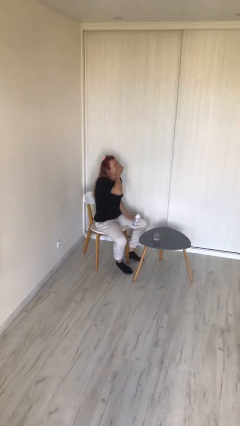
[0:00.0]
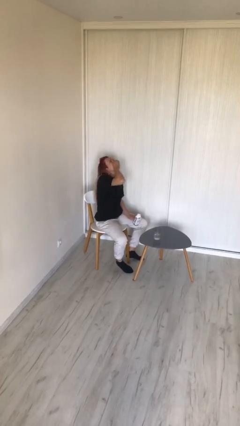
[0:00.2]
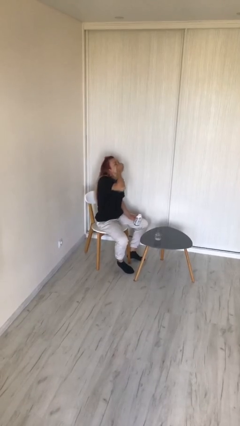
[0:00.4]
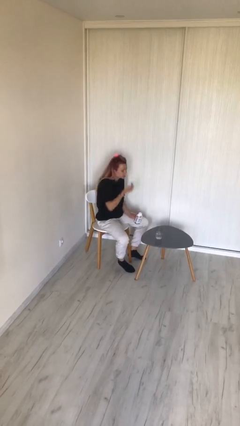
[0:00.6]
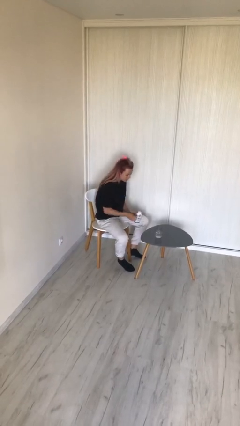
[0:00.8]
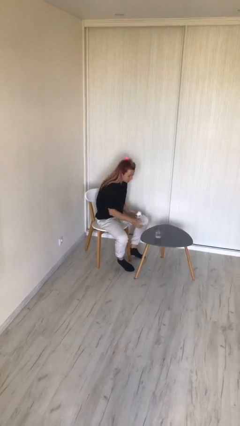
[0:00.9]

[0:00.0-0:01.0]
person takes medicine pills

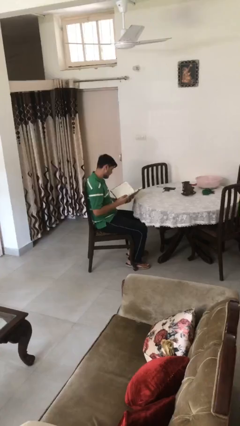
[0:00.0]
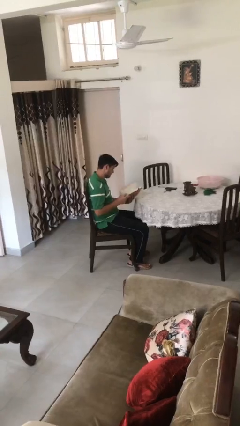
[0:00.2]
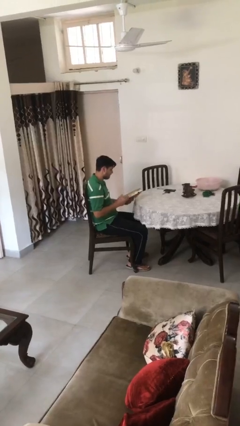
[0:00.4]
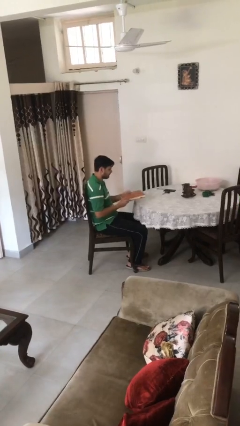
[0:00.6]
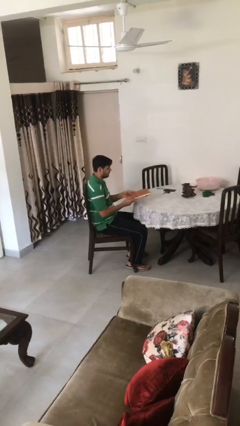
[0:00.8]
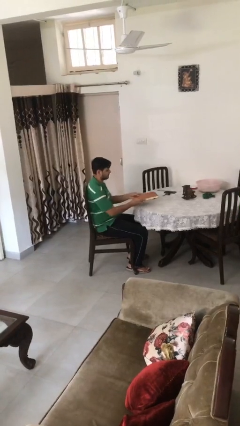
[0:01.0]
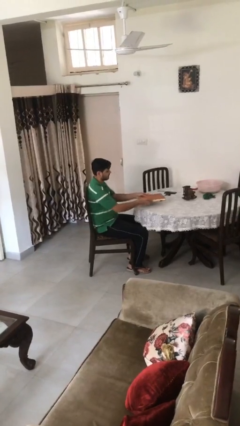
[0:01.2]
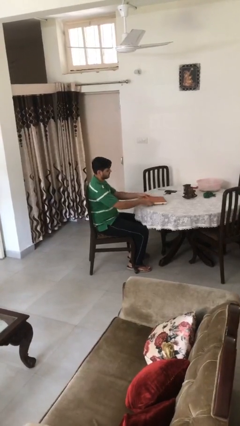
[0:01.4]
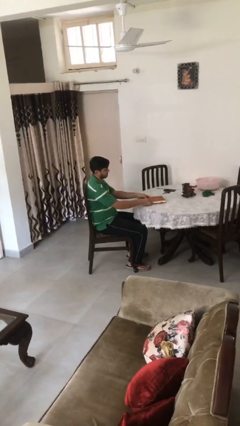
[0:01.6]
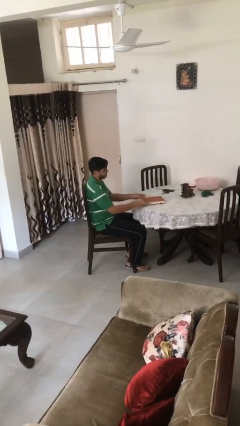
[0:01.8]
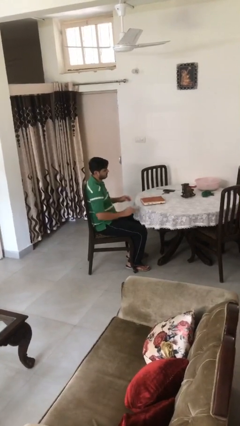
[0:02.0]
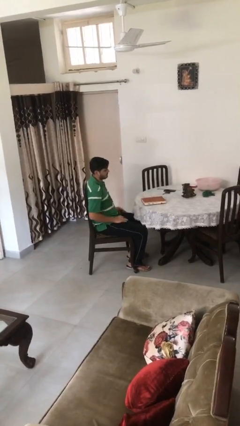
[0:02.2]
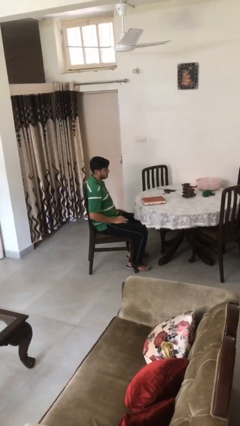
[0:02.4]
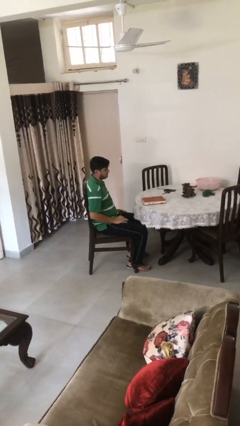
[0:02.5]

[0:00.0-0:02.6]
person puts down object on table

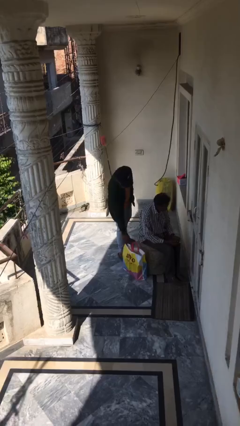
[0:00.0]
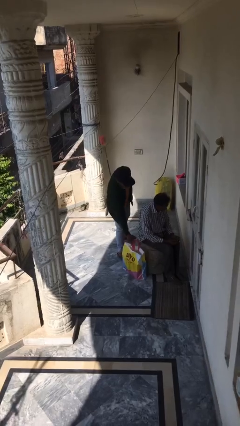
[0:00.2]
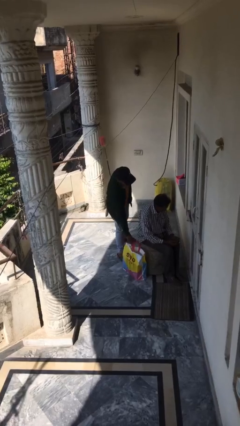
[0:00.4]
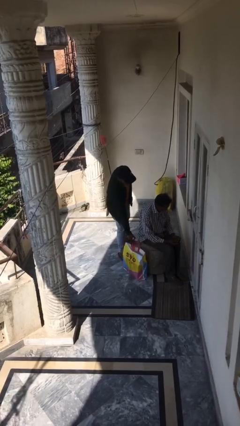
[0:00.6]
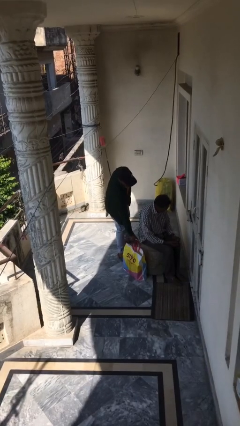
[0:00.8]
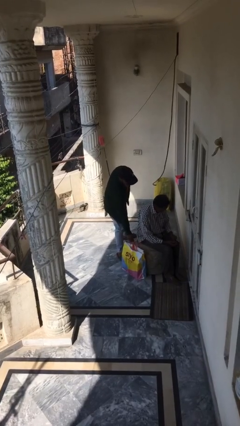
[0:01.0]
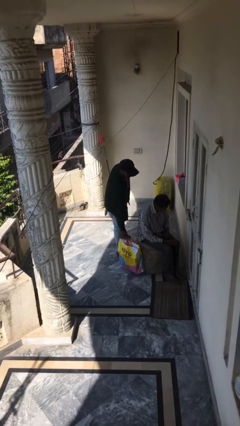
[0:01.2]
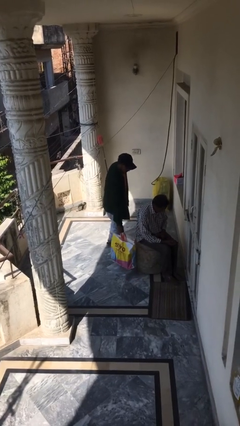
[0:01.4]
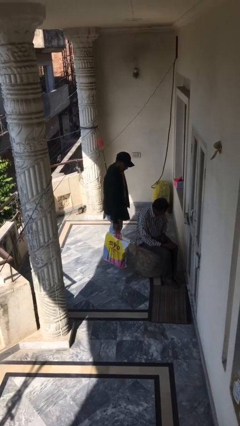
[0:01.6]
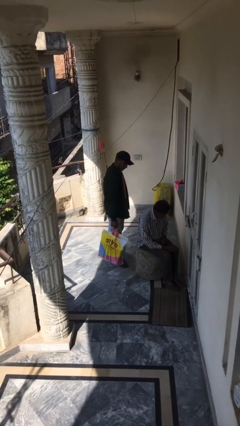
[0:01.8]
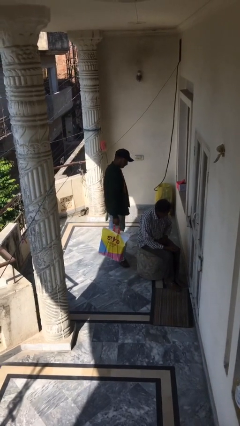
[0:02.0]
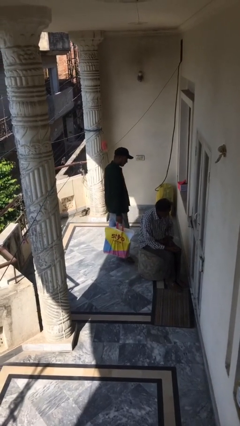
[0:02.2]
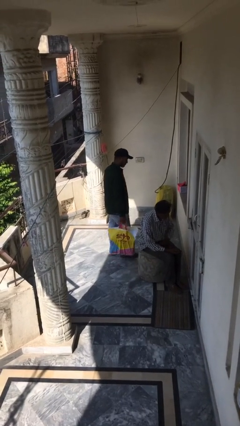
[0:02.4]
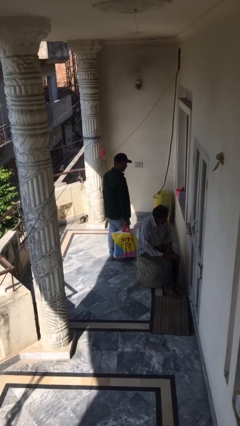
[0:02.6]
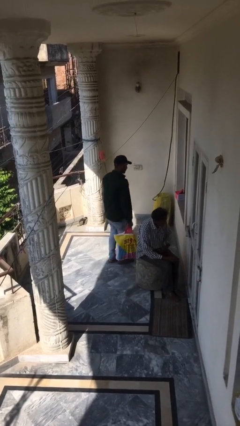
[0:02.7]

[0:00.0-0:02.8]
person steals object from person

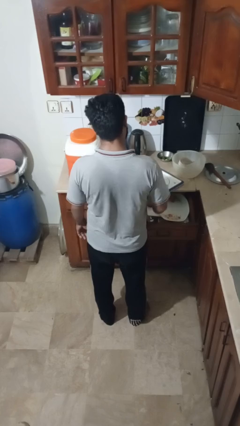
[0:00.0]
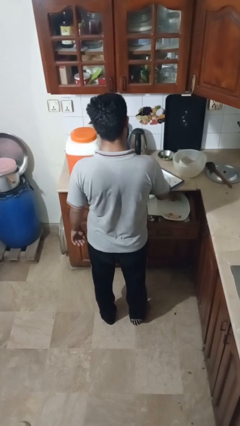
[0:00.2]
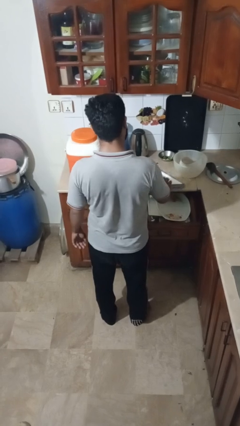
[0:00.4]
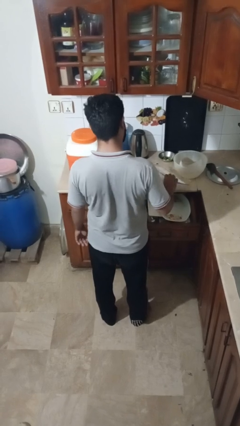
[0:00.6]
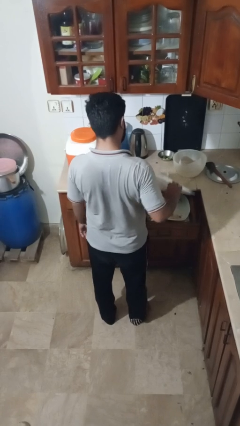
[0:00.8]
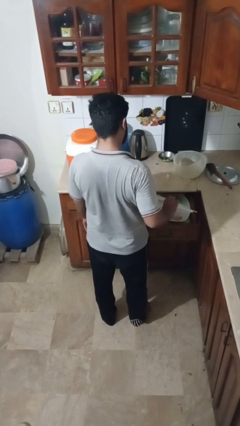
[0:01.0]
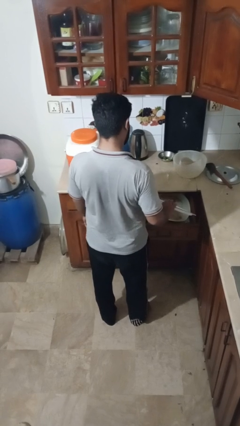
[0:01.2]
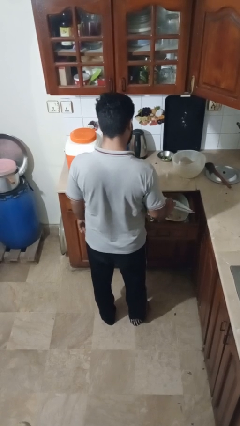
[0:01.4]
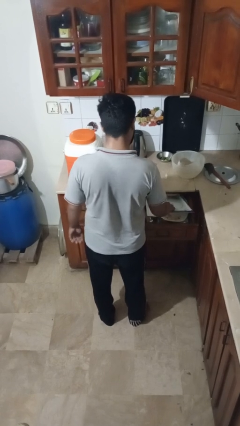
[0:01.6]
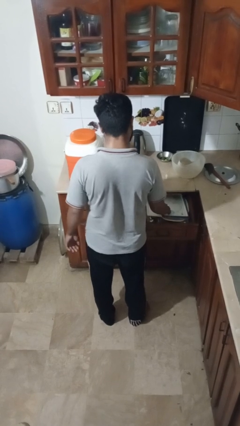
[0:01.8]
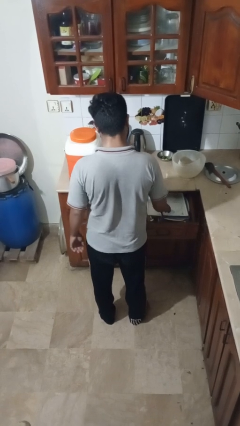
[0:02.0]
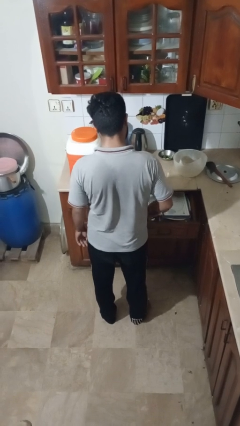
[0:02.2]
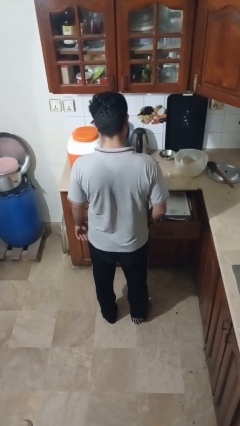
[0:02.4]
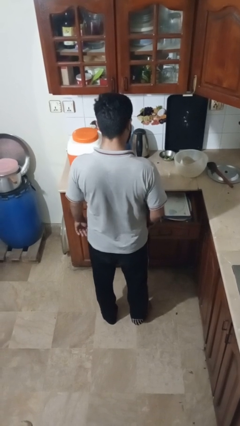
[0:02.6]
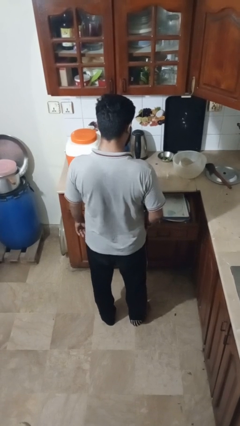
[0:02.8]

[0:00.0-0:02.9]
person puts object into kitchen drawer

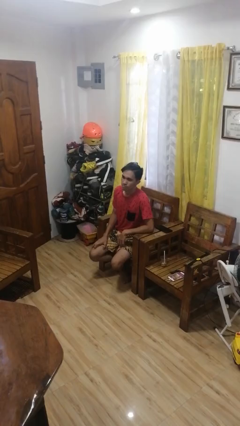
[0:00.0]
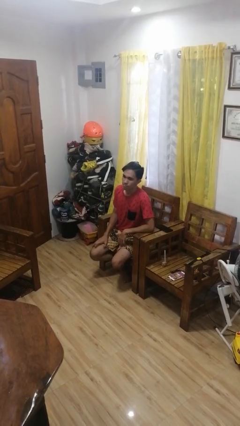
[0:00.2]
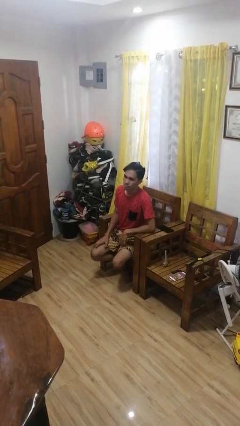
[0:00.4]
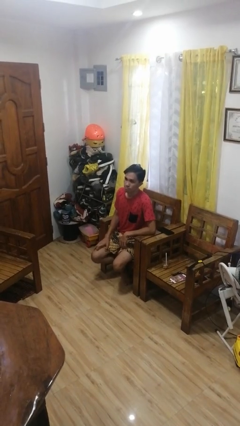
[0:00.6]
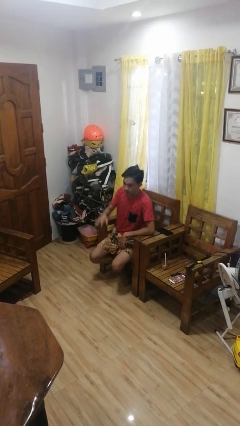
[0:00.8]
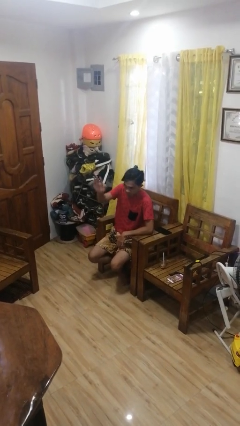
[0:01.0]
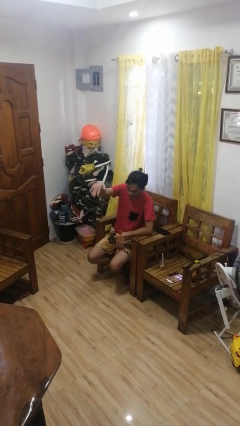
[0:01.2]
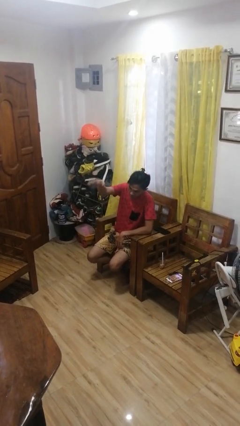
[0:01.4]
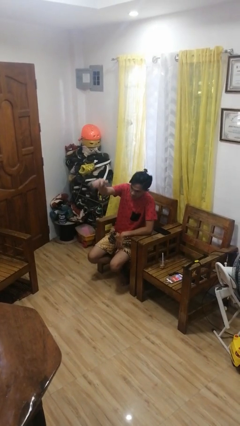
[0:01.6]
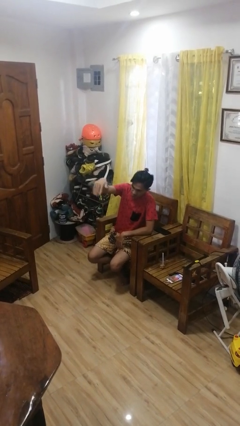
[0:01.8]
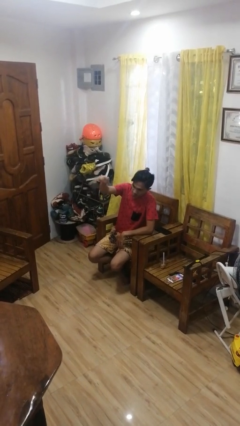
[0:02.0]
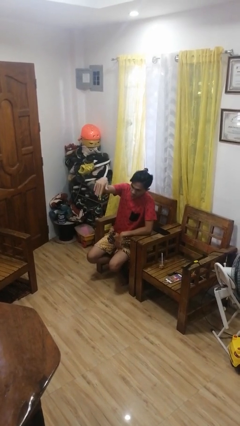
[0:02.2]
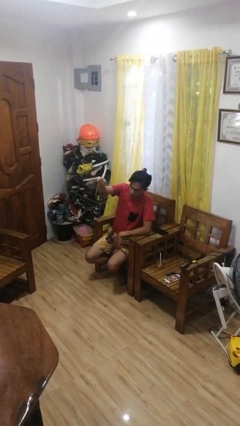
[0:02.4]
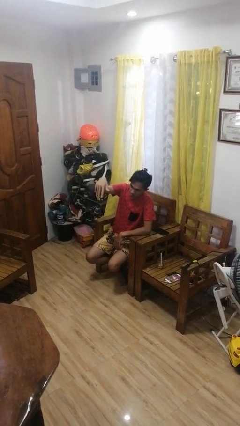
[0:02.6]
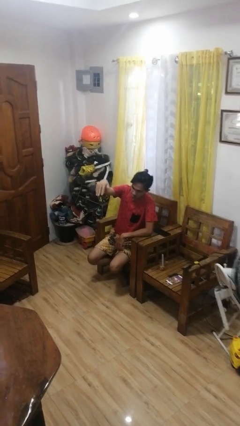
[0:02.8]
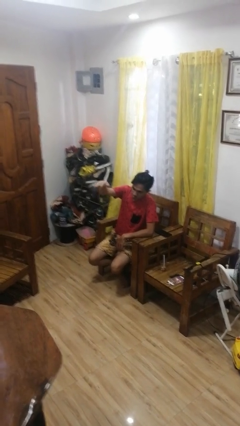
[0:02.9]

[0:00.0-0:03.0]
person gestures come here

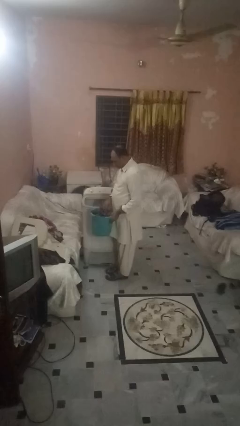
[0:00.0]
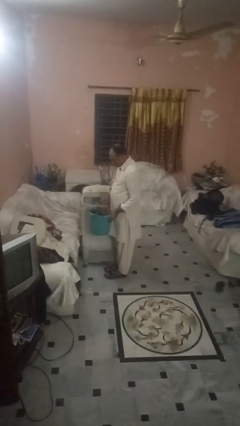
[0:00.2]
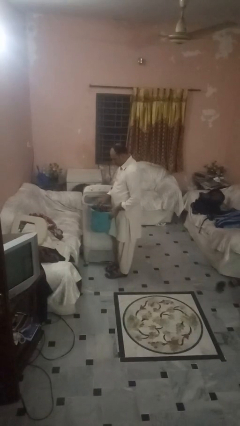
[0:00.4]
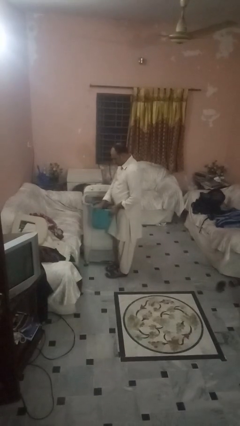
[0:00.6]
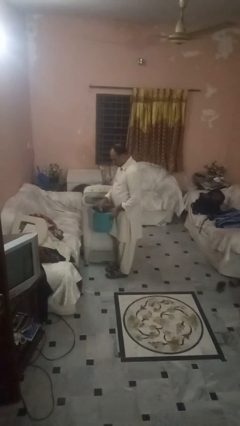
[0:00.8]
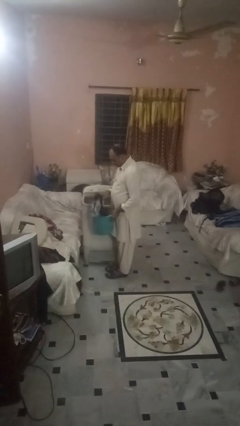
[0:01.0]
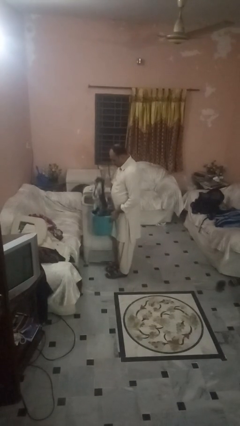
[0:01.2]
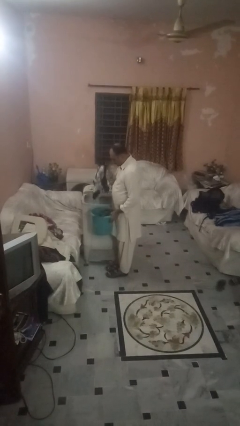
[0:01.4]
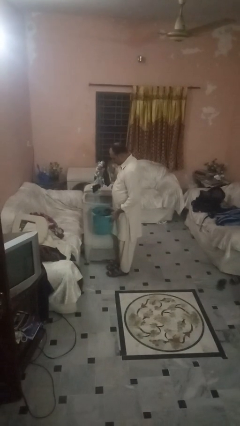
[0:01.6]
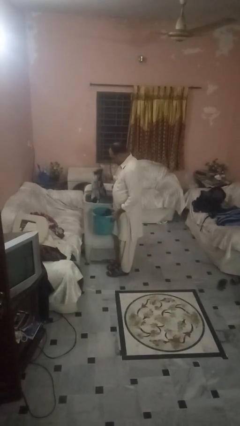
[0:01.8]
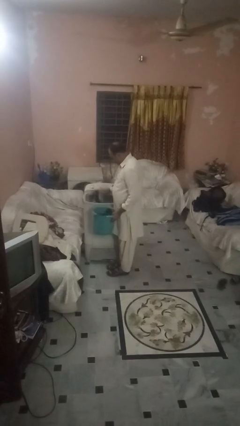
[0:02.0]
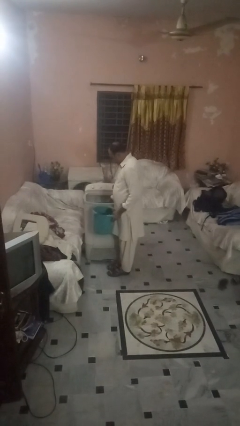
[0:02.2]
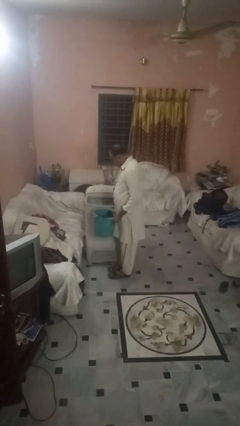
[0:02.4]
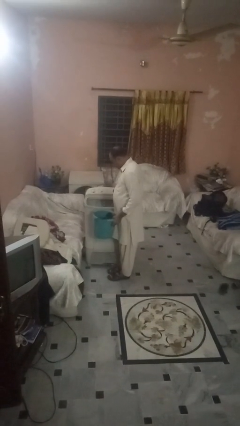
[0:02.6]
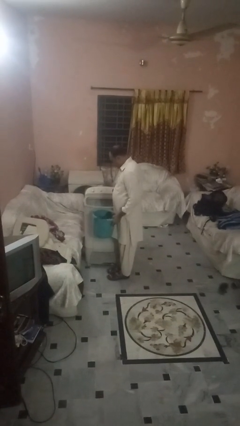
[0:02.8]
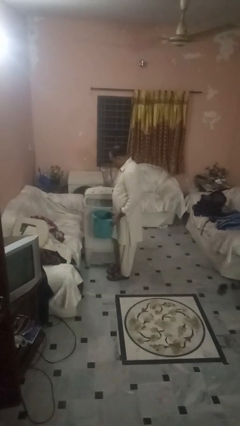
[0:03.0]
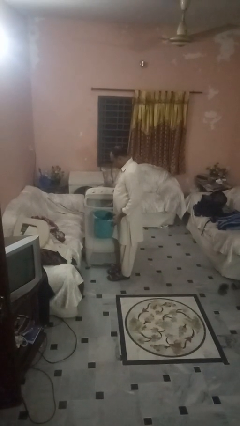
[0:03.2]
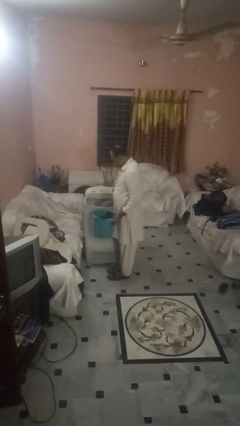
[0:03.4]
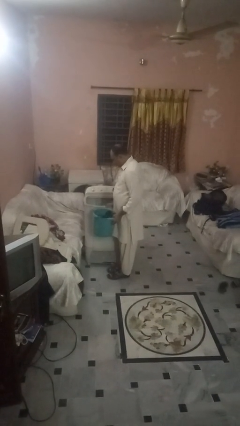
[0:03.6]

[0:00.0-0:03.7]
person loads clotheswasher

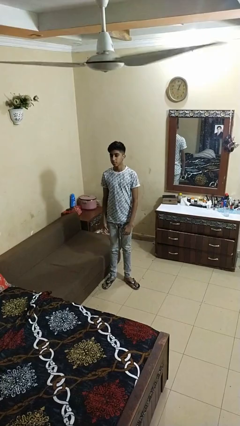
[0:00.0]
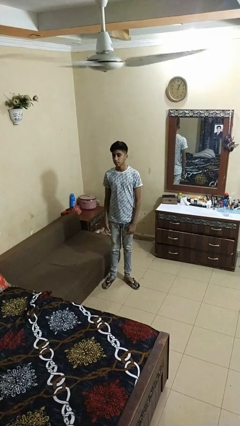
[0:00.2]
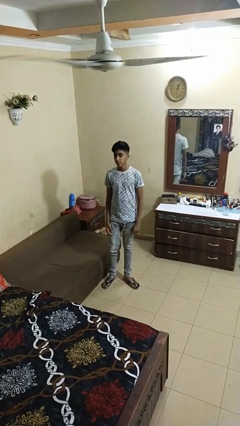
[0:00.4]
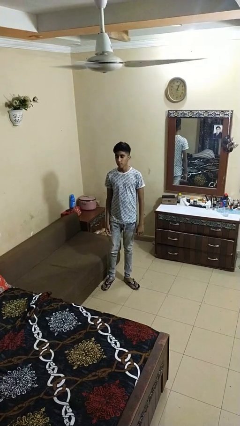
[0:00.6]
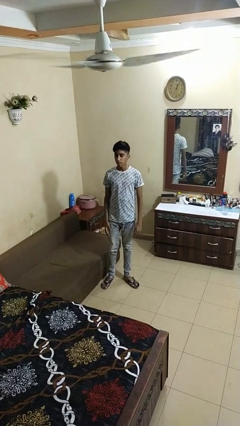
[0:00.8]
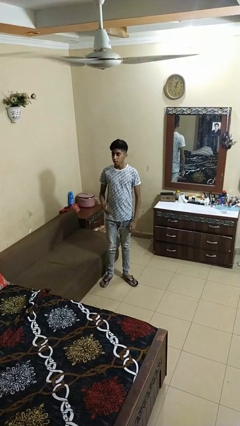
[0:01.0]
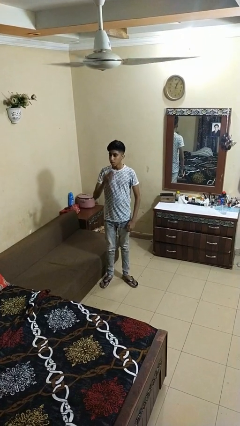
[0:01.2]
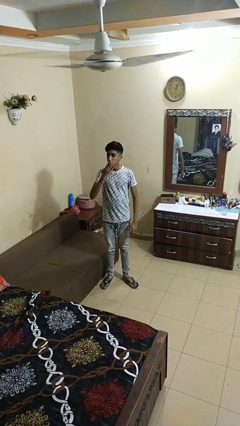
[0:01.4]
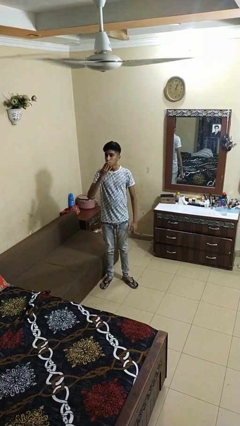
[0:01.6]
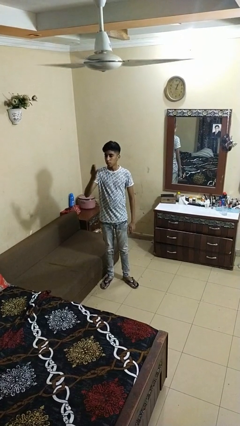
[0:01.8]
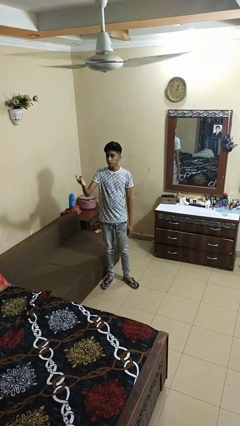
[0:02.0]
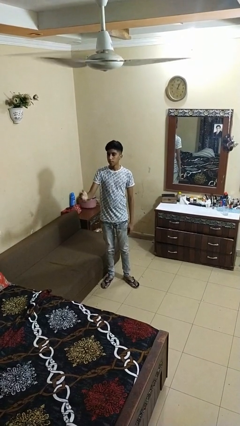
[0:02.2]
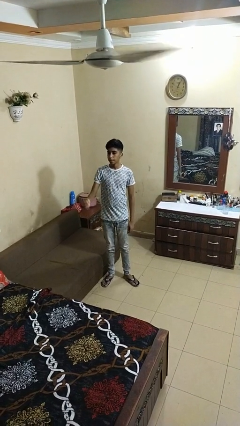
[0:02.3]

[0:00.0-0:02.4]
person gestures blow kiss
